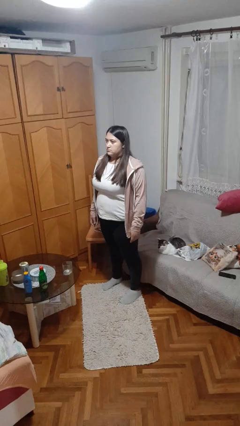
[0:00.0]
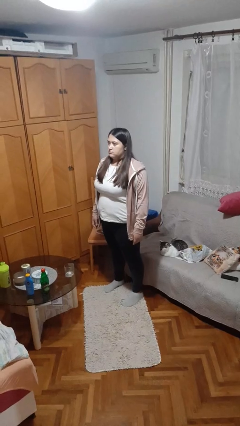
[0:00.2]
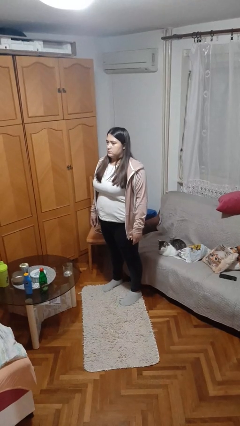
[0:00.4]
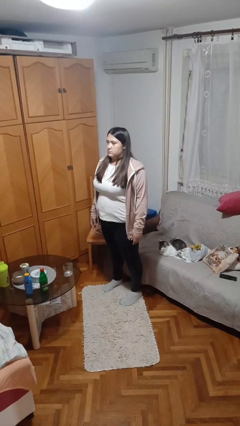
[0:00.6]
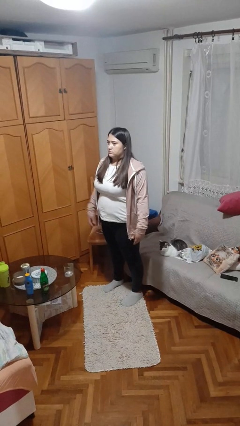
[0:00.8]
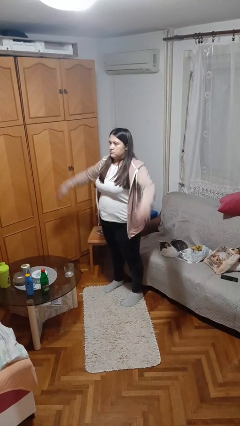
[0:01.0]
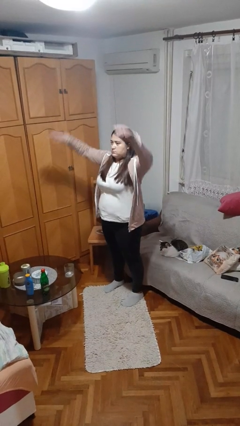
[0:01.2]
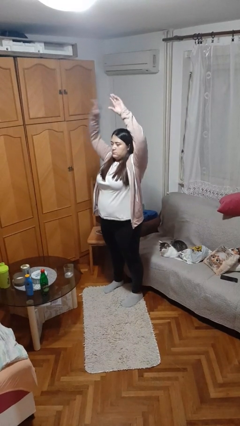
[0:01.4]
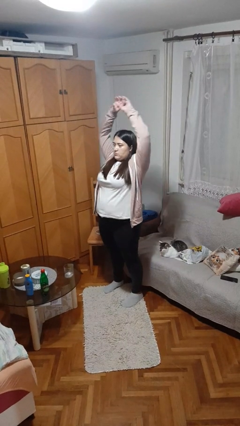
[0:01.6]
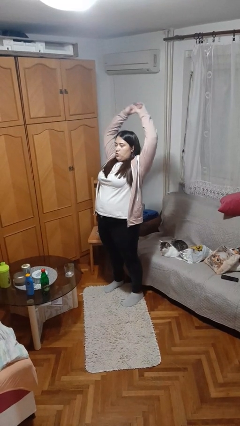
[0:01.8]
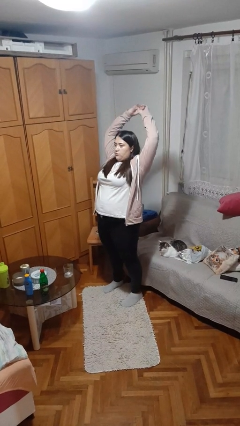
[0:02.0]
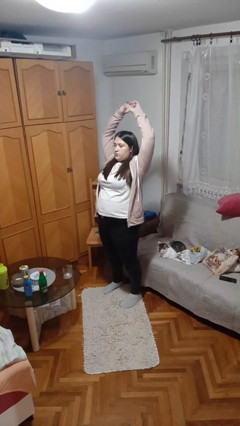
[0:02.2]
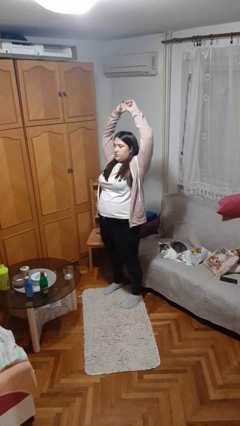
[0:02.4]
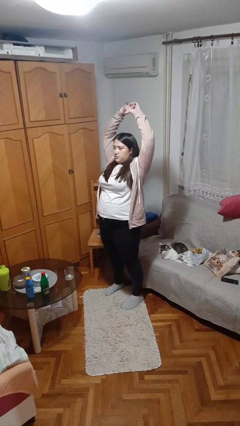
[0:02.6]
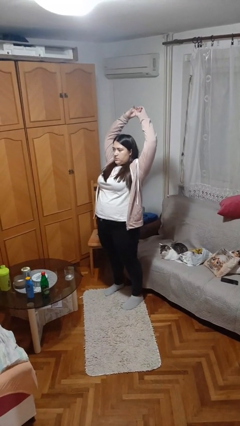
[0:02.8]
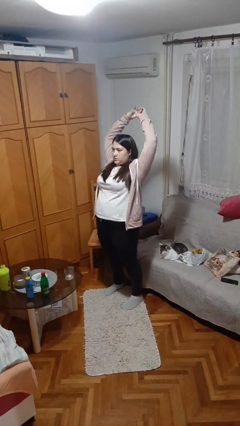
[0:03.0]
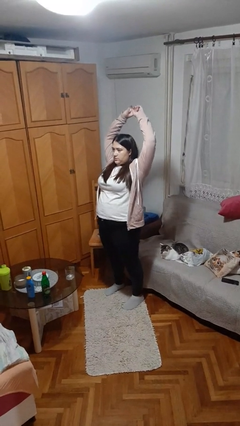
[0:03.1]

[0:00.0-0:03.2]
person stretches arms over head

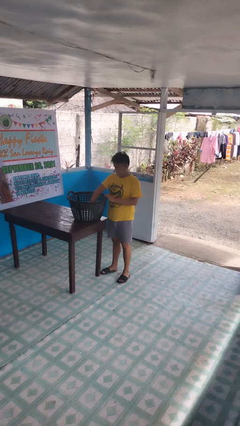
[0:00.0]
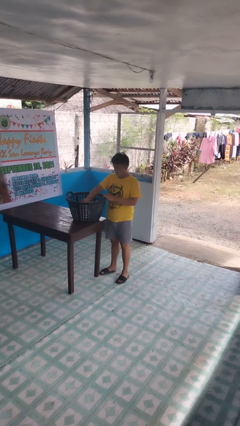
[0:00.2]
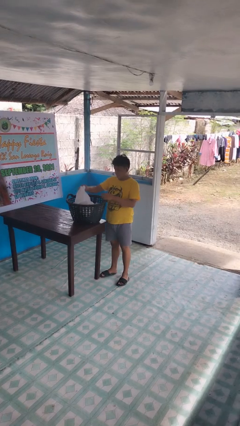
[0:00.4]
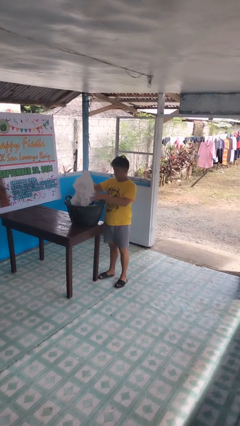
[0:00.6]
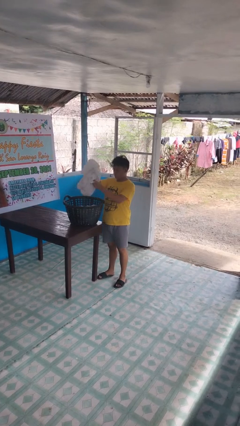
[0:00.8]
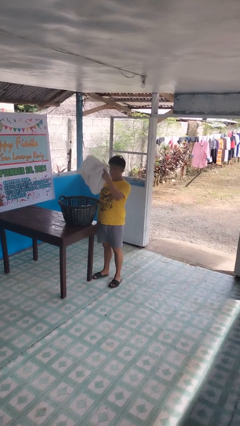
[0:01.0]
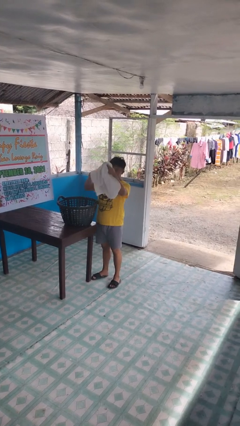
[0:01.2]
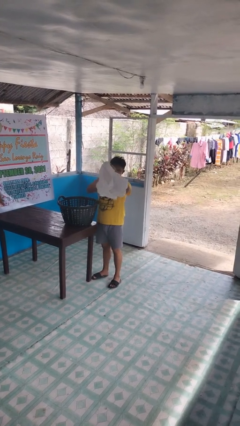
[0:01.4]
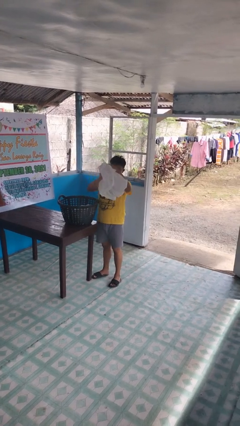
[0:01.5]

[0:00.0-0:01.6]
person takes object from basket

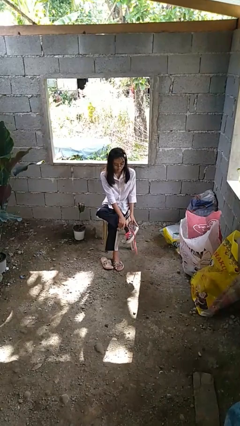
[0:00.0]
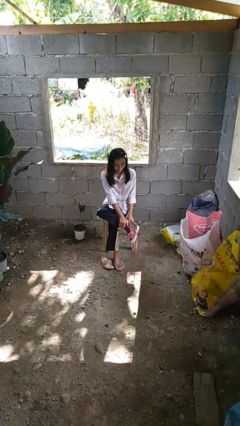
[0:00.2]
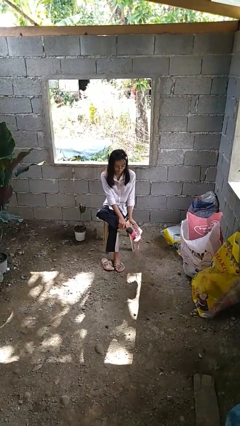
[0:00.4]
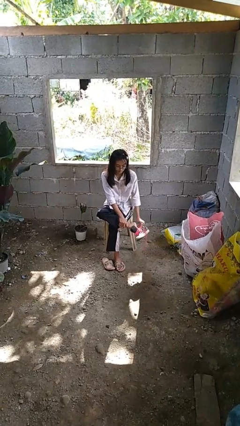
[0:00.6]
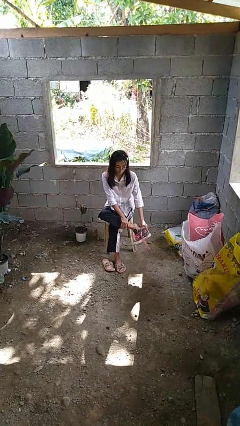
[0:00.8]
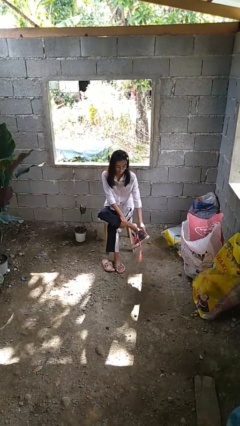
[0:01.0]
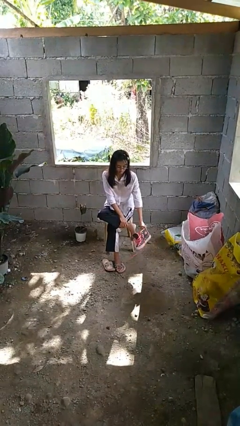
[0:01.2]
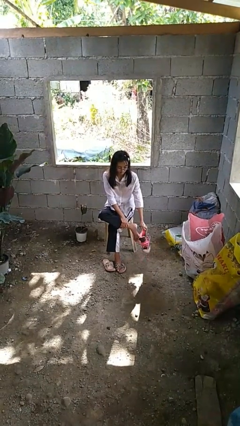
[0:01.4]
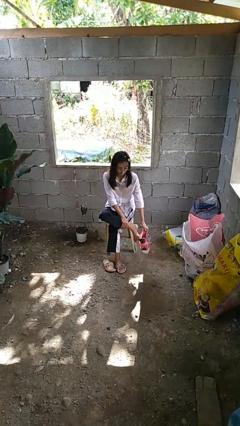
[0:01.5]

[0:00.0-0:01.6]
person takes off shoes

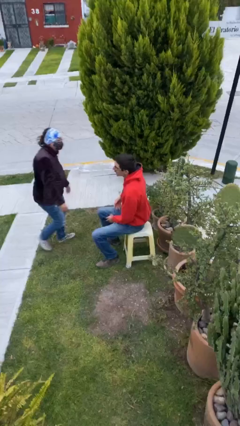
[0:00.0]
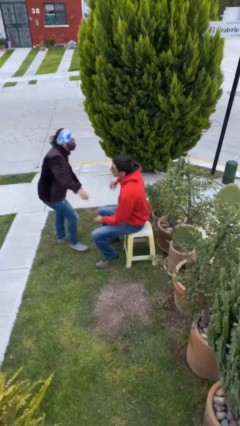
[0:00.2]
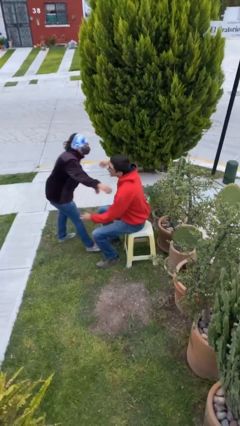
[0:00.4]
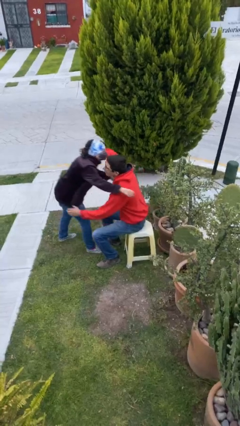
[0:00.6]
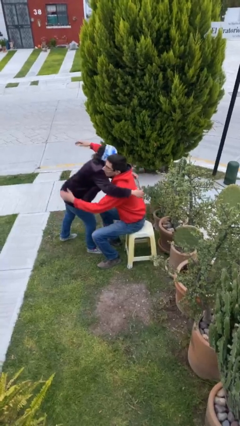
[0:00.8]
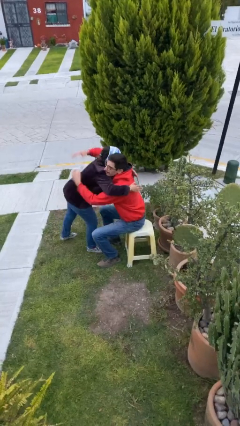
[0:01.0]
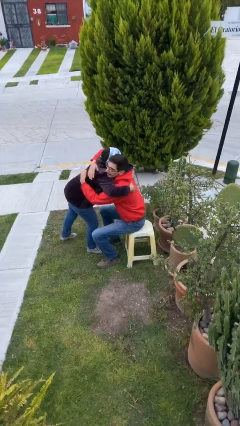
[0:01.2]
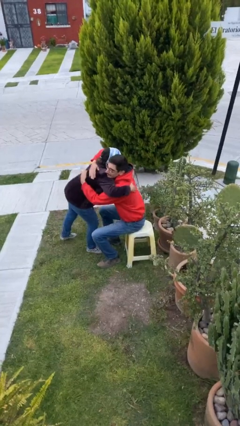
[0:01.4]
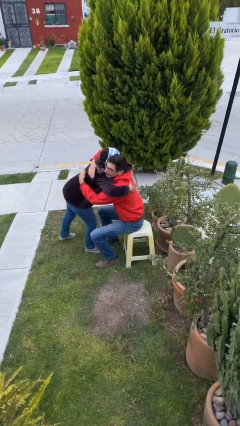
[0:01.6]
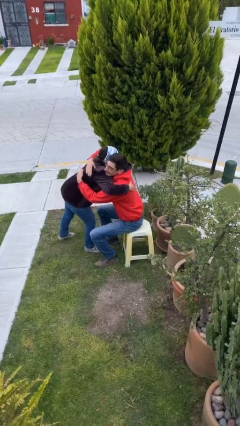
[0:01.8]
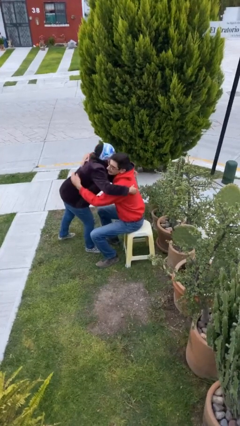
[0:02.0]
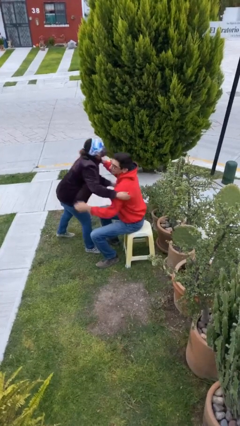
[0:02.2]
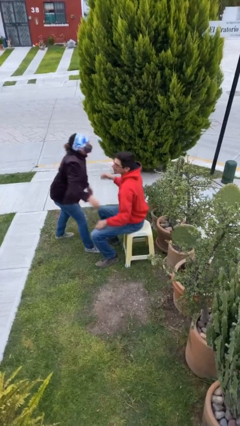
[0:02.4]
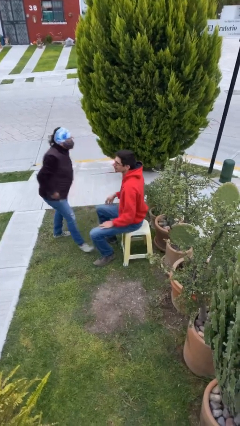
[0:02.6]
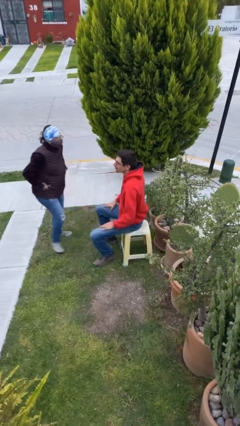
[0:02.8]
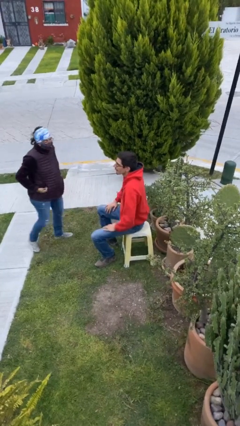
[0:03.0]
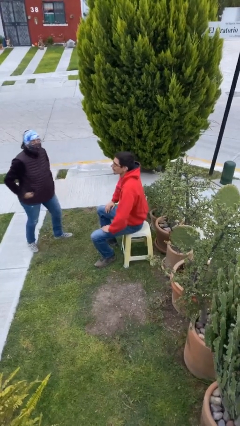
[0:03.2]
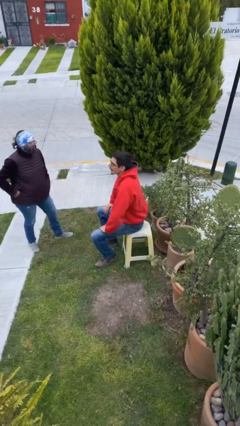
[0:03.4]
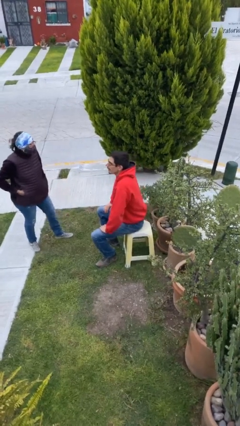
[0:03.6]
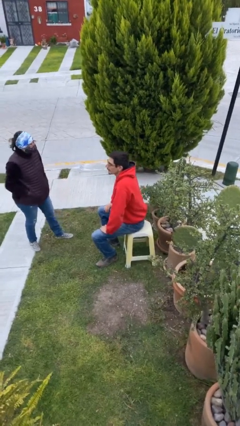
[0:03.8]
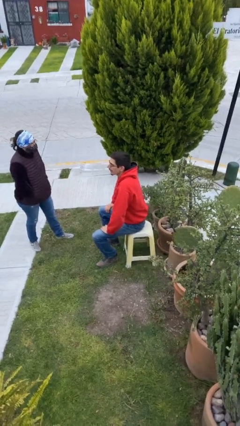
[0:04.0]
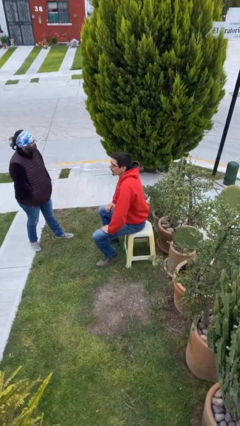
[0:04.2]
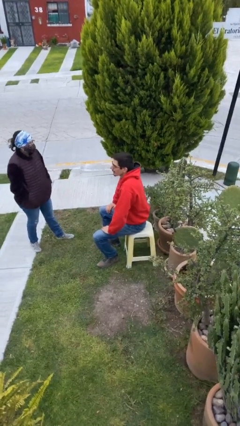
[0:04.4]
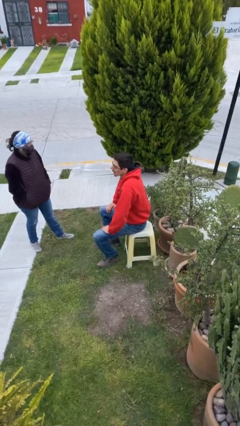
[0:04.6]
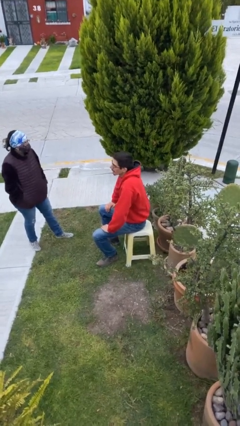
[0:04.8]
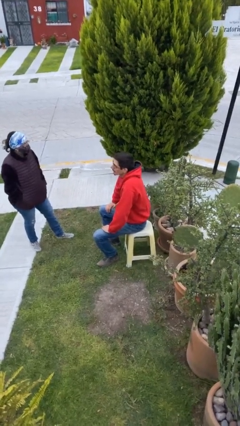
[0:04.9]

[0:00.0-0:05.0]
person embraces person

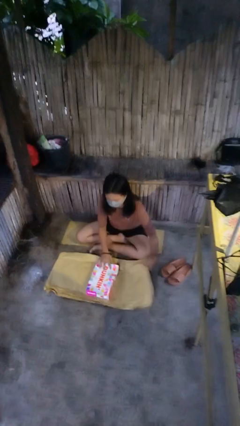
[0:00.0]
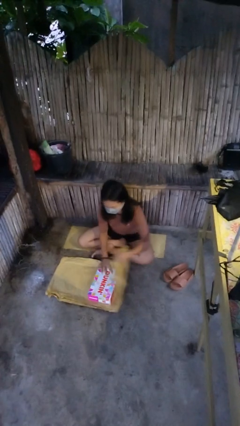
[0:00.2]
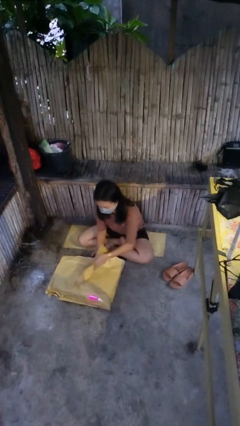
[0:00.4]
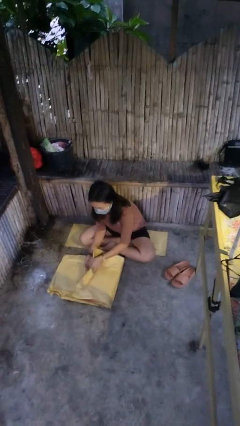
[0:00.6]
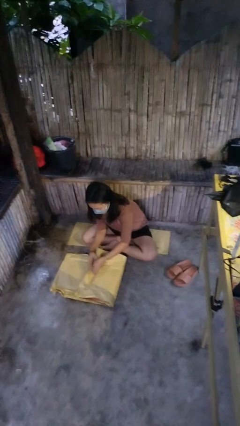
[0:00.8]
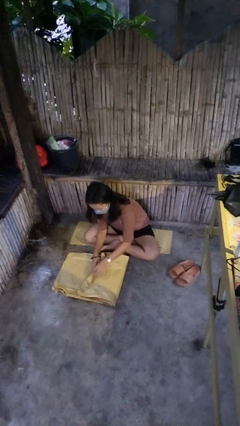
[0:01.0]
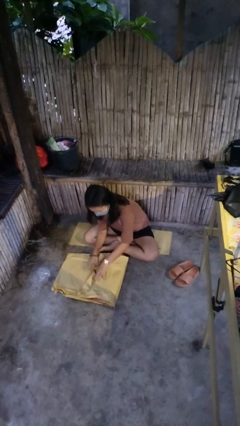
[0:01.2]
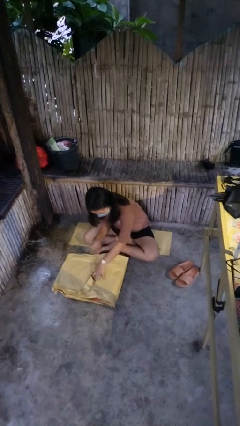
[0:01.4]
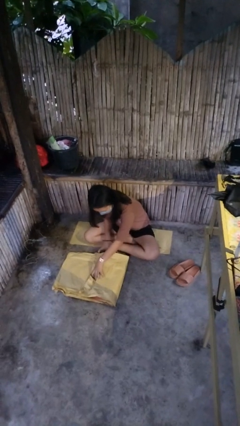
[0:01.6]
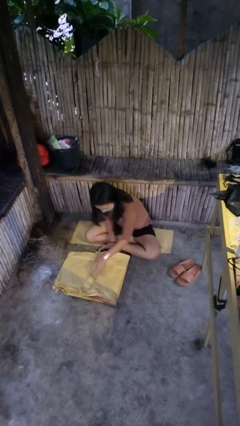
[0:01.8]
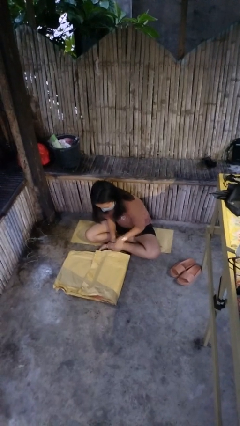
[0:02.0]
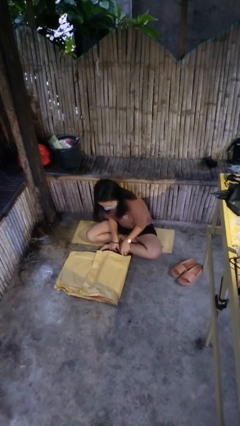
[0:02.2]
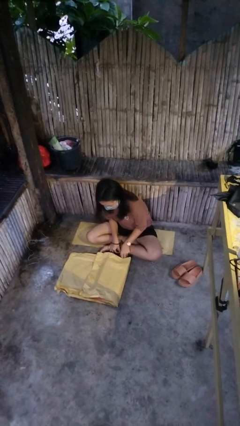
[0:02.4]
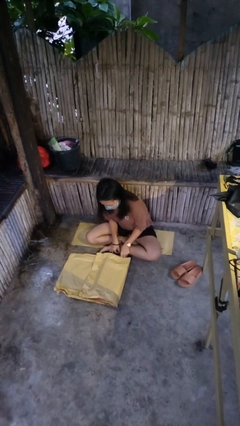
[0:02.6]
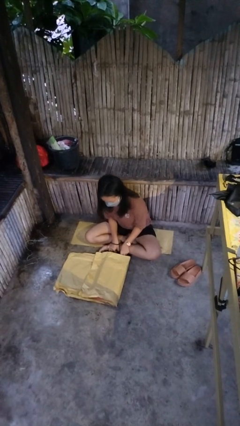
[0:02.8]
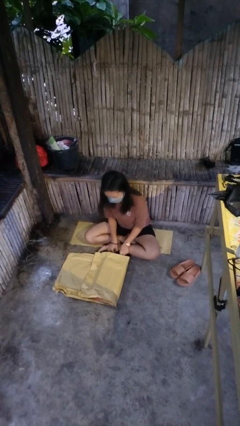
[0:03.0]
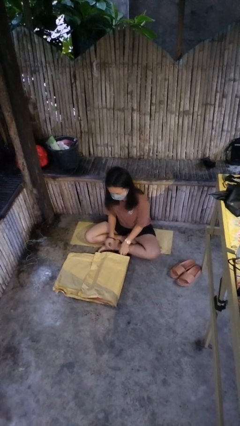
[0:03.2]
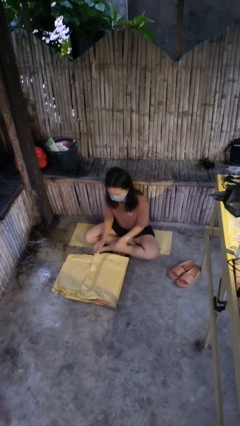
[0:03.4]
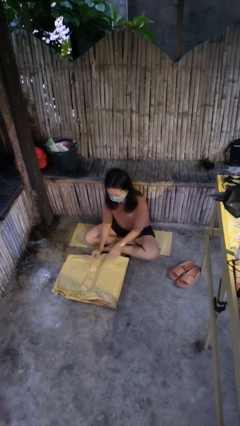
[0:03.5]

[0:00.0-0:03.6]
person wraps box

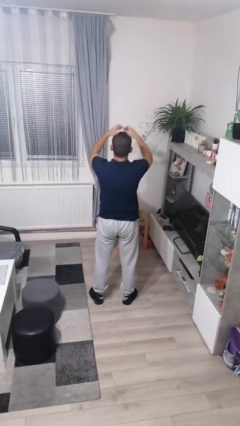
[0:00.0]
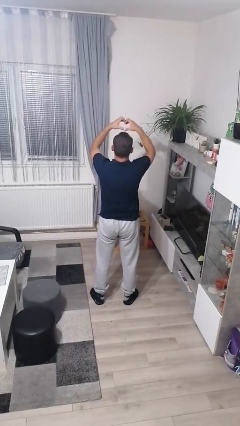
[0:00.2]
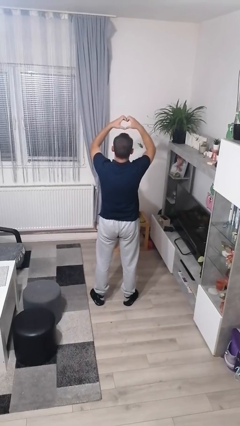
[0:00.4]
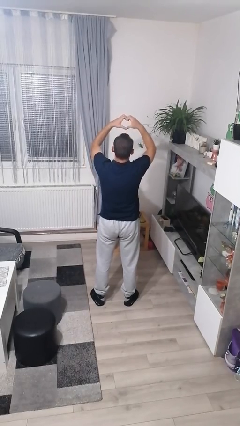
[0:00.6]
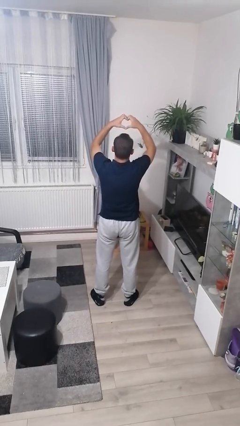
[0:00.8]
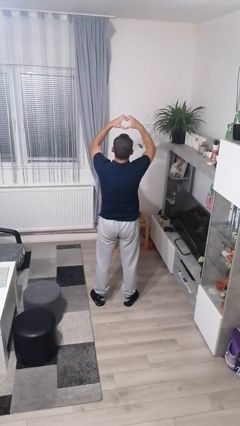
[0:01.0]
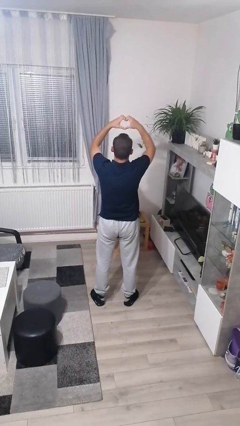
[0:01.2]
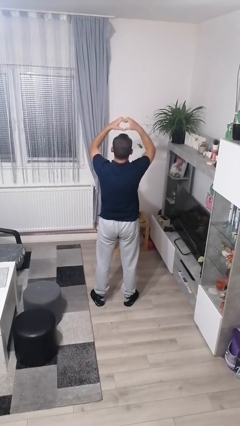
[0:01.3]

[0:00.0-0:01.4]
person gestures heart

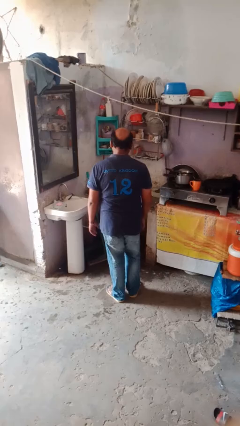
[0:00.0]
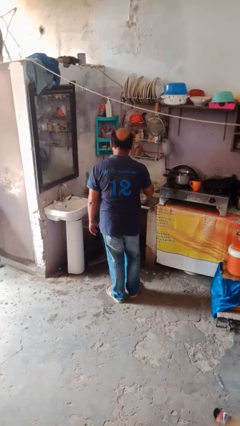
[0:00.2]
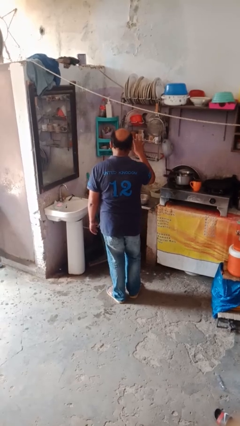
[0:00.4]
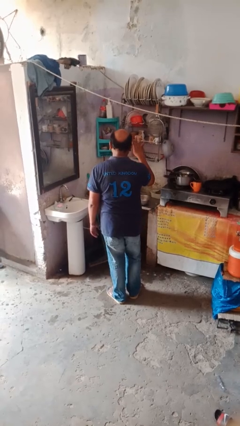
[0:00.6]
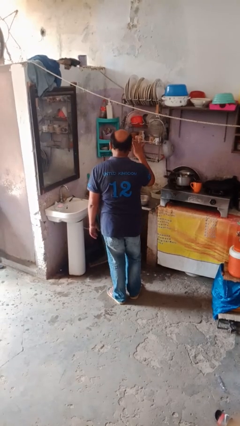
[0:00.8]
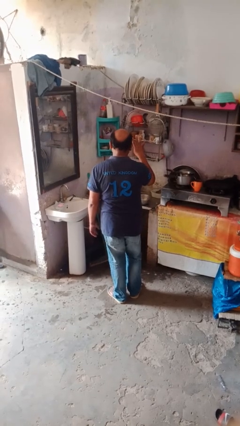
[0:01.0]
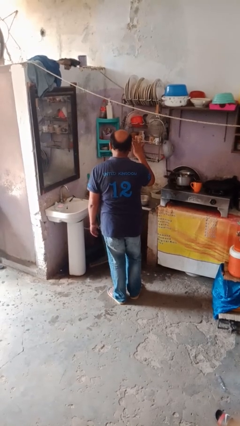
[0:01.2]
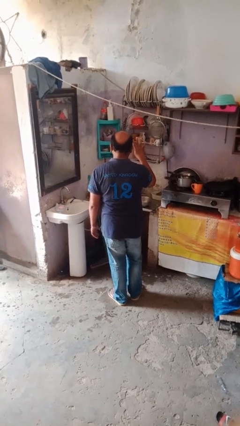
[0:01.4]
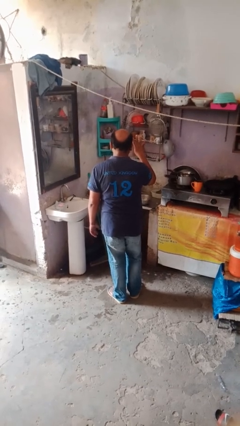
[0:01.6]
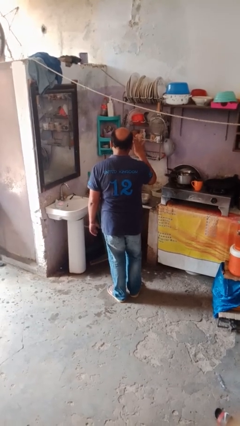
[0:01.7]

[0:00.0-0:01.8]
person gestures number four
